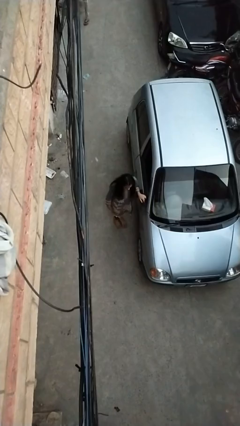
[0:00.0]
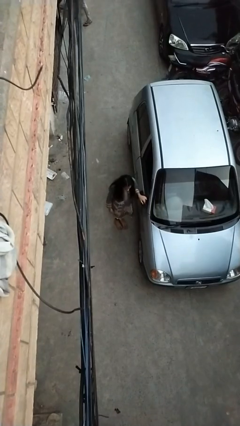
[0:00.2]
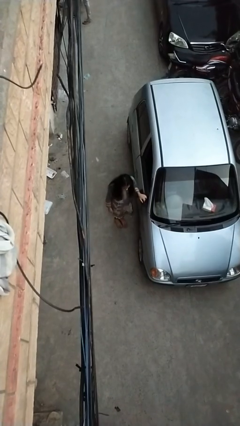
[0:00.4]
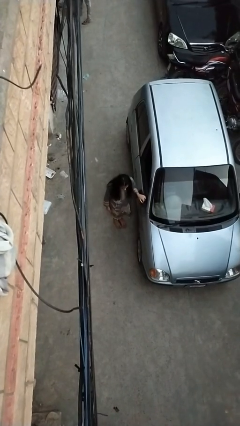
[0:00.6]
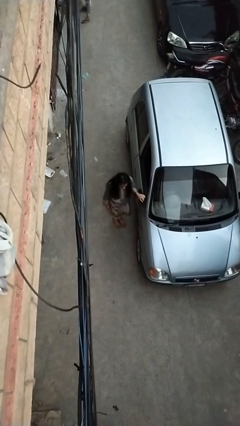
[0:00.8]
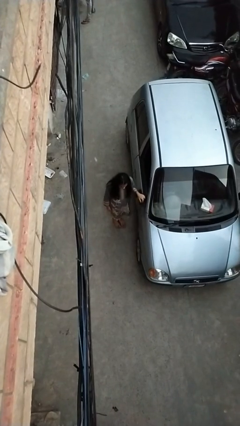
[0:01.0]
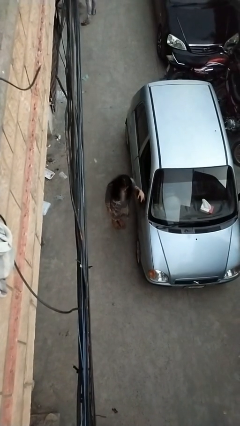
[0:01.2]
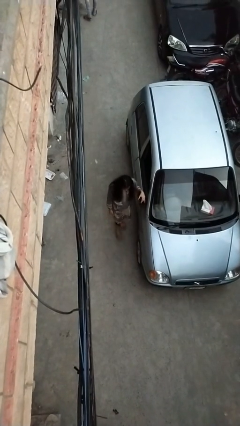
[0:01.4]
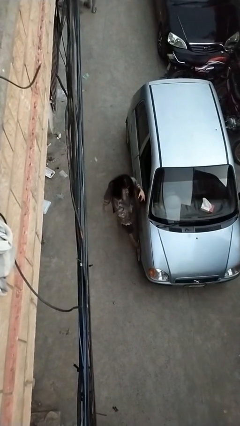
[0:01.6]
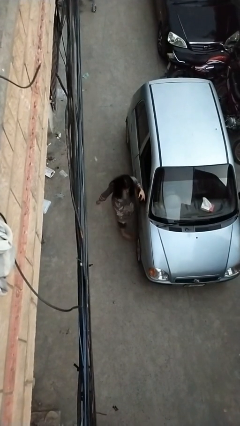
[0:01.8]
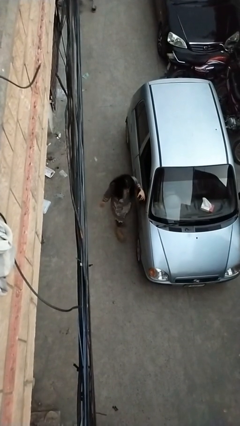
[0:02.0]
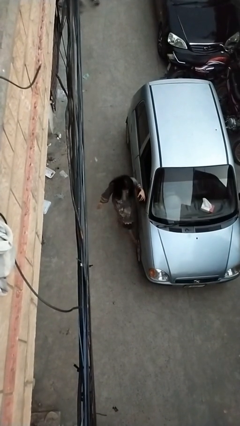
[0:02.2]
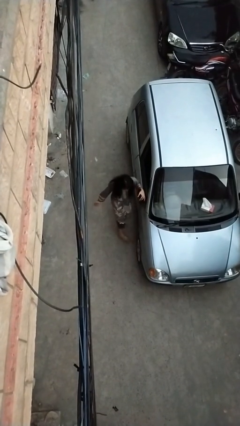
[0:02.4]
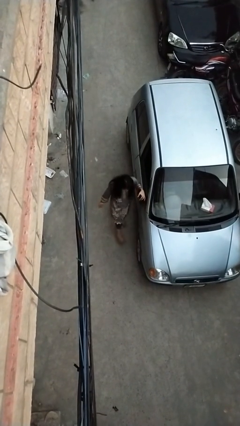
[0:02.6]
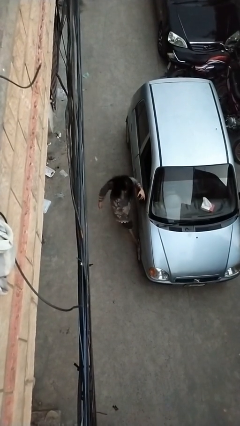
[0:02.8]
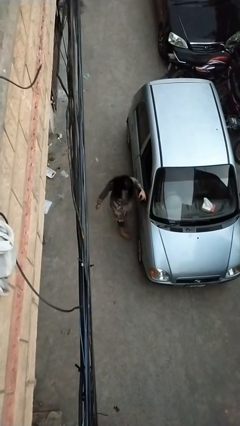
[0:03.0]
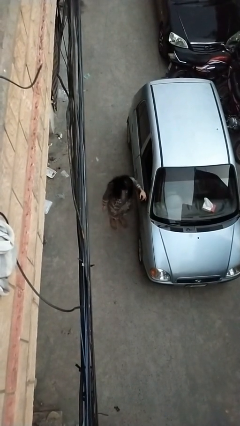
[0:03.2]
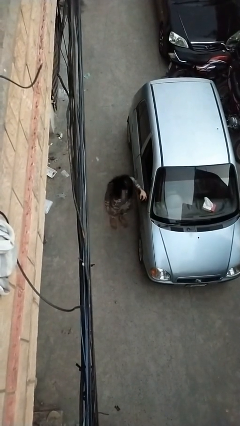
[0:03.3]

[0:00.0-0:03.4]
person kicks car tires

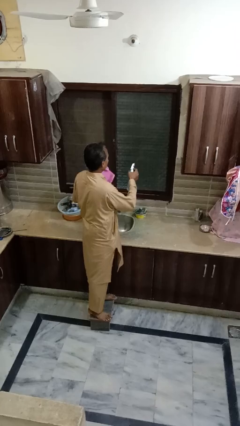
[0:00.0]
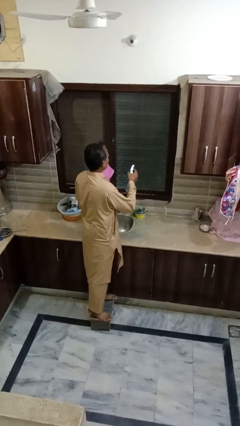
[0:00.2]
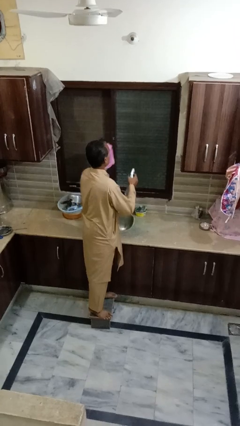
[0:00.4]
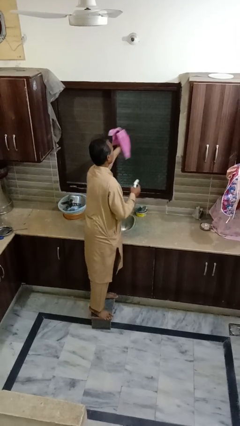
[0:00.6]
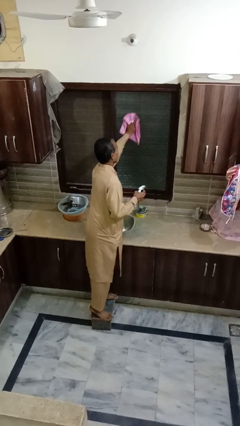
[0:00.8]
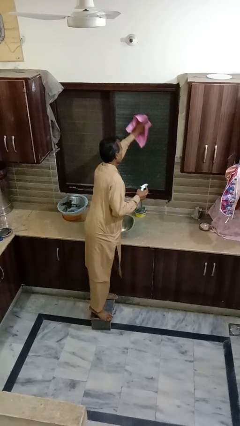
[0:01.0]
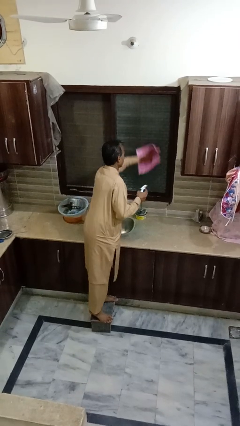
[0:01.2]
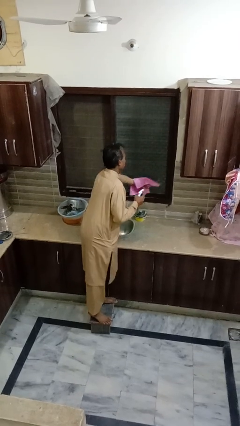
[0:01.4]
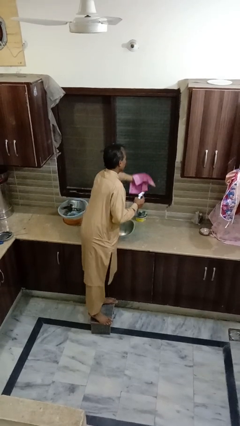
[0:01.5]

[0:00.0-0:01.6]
person washes window

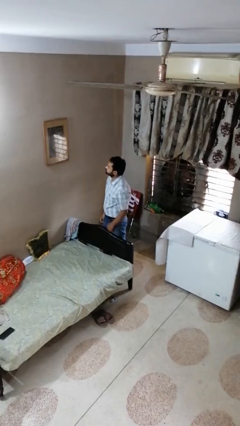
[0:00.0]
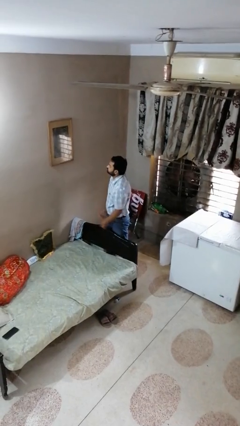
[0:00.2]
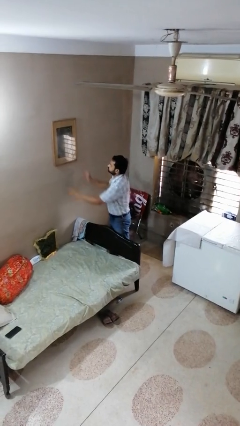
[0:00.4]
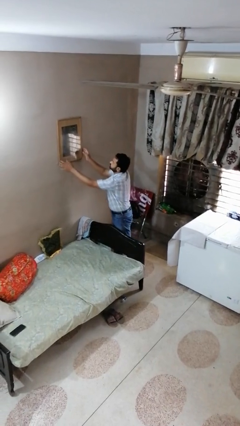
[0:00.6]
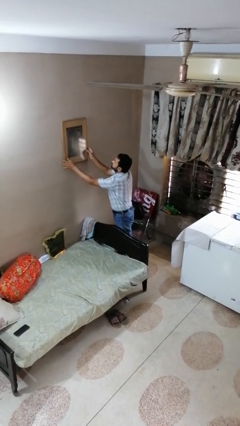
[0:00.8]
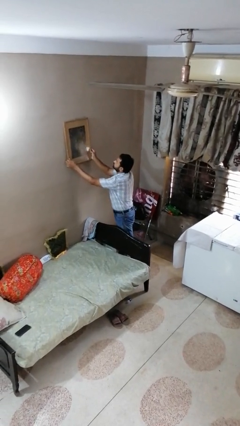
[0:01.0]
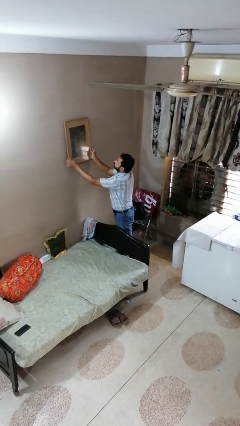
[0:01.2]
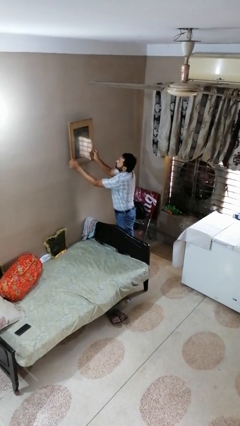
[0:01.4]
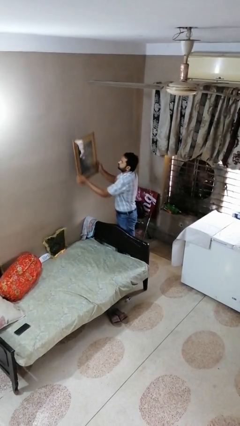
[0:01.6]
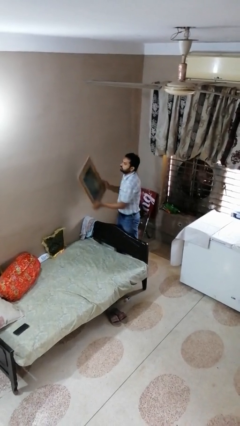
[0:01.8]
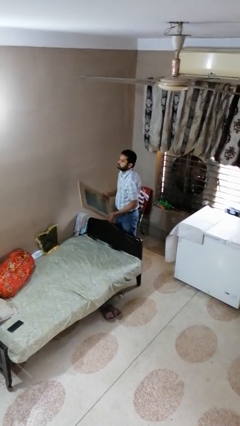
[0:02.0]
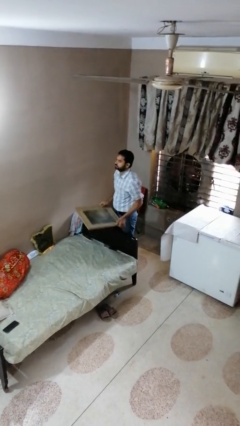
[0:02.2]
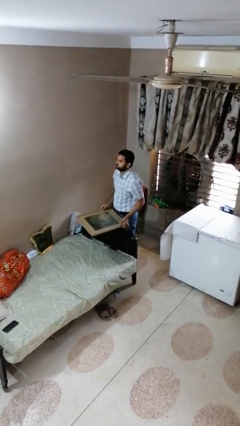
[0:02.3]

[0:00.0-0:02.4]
person takes down picture frame

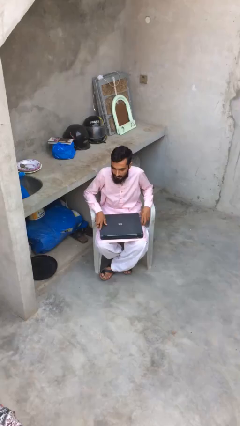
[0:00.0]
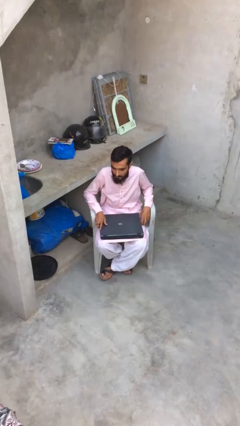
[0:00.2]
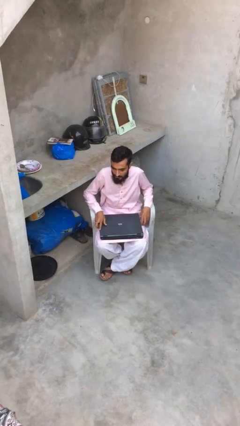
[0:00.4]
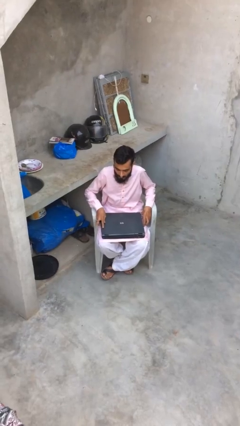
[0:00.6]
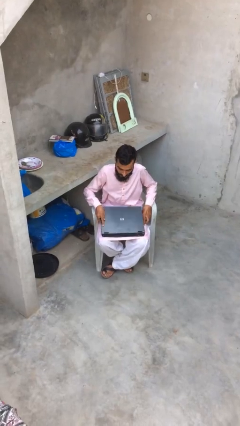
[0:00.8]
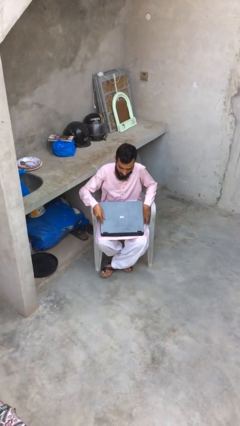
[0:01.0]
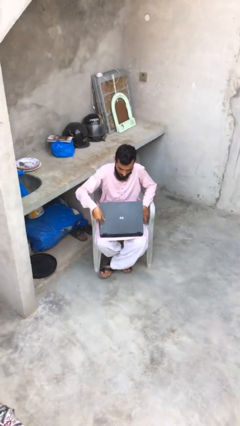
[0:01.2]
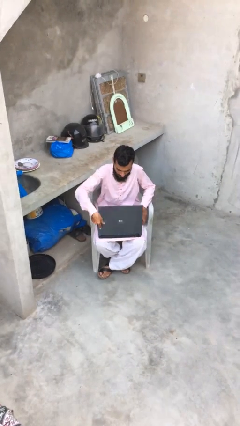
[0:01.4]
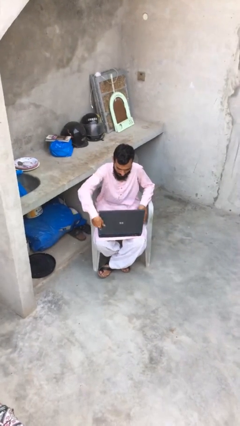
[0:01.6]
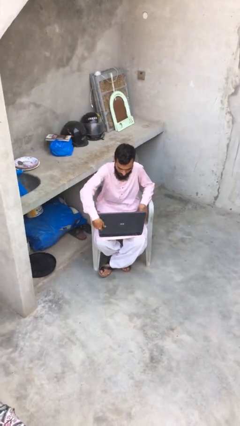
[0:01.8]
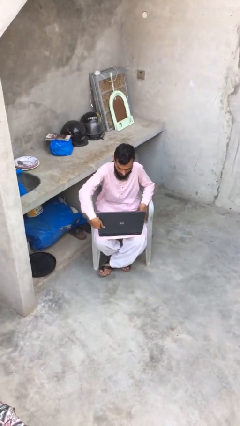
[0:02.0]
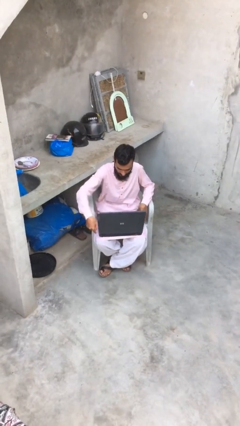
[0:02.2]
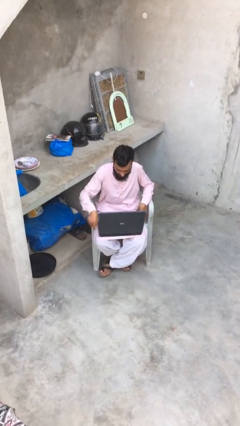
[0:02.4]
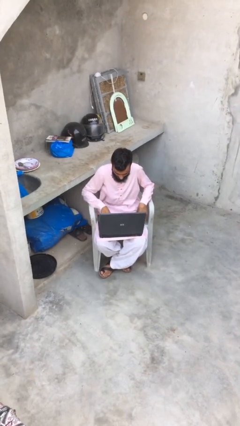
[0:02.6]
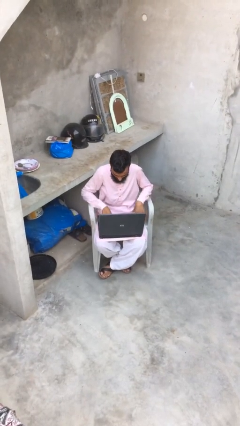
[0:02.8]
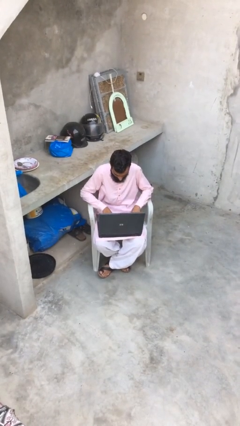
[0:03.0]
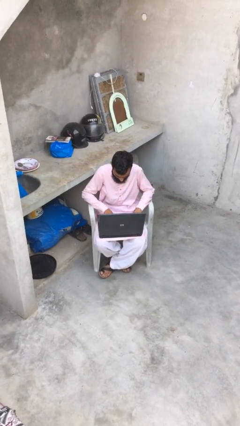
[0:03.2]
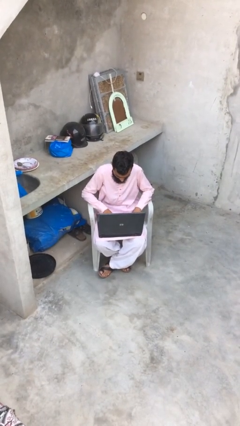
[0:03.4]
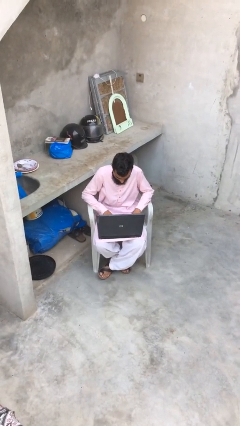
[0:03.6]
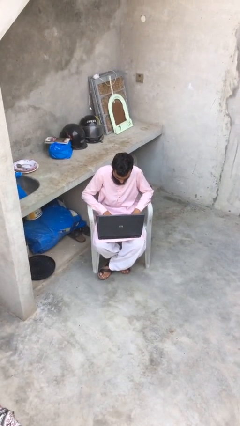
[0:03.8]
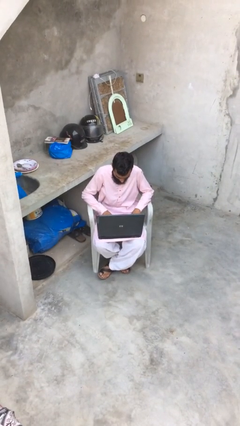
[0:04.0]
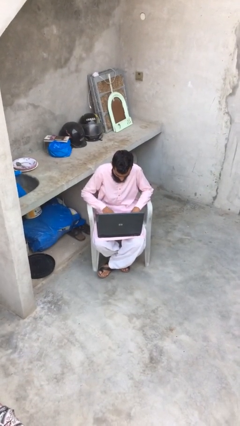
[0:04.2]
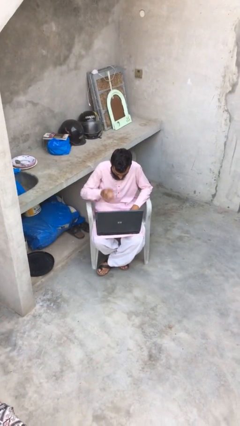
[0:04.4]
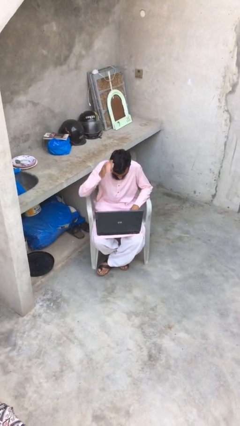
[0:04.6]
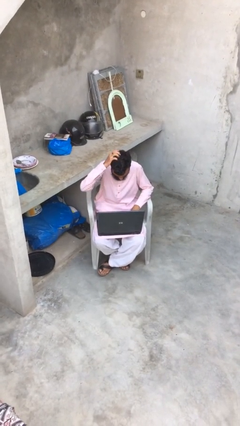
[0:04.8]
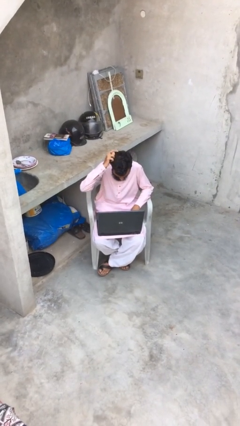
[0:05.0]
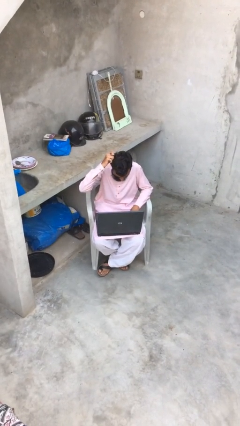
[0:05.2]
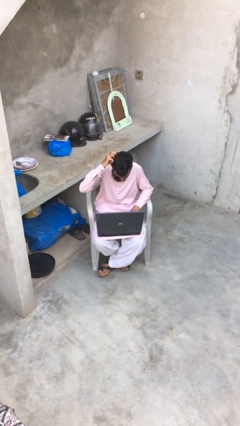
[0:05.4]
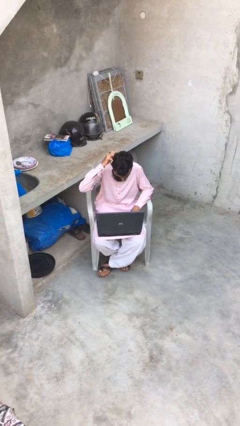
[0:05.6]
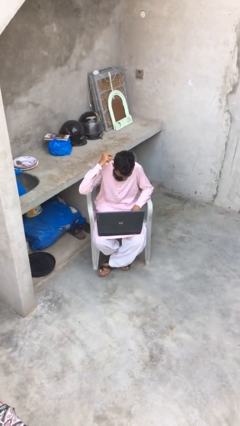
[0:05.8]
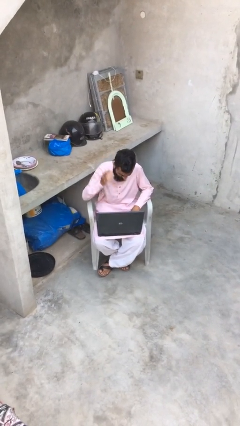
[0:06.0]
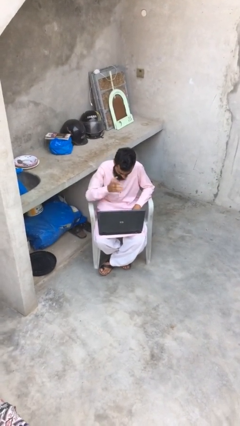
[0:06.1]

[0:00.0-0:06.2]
person interacts with laptop

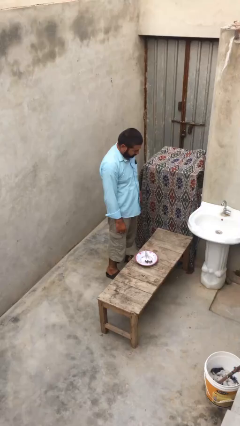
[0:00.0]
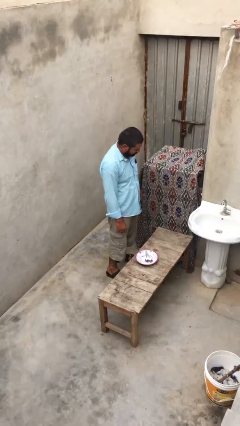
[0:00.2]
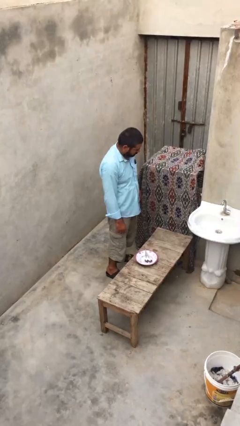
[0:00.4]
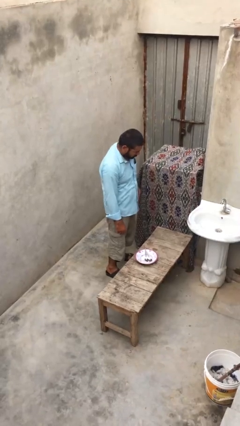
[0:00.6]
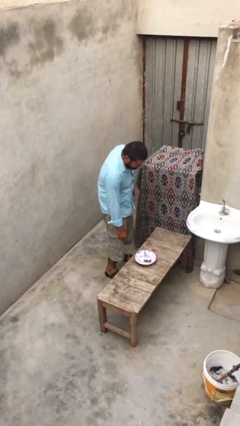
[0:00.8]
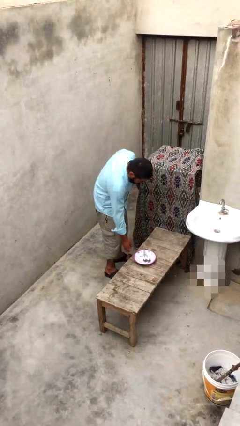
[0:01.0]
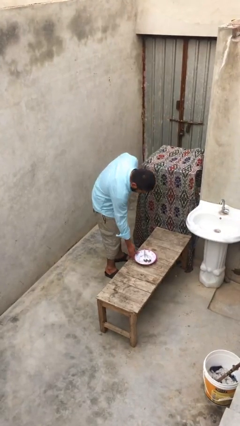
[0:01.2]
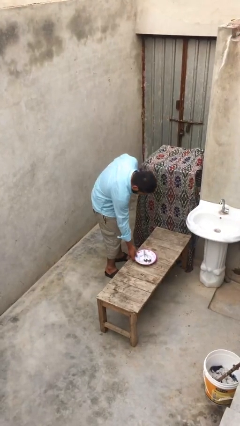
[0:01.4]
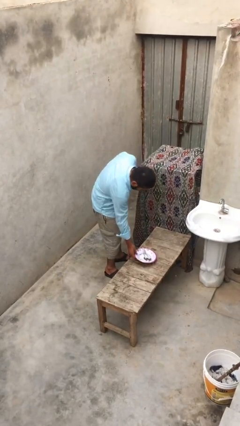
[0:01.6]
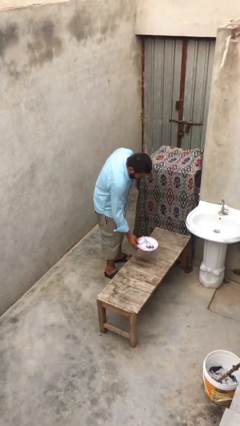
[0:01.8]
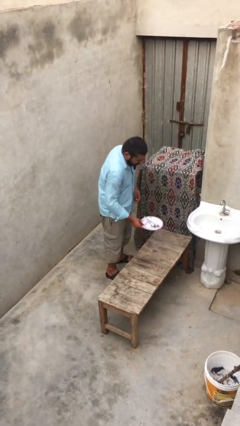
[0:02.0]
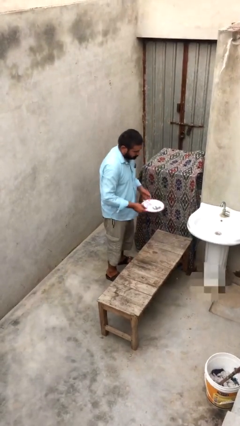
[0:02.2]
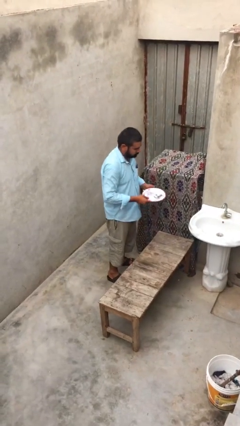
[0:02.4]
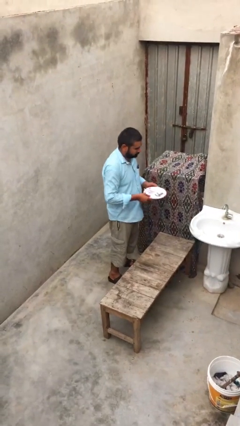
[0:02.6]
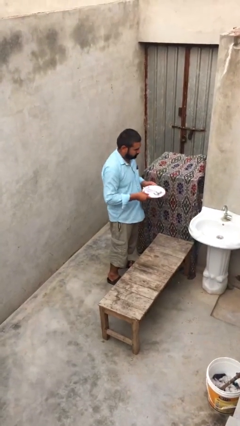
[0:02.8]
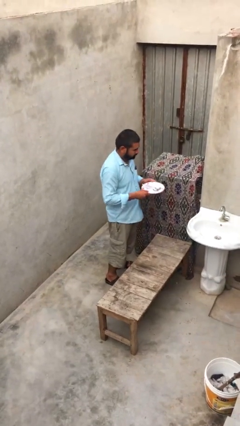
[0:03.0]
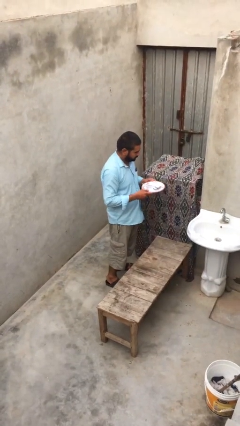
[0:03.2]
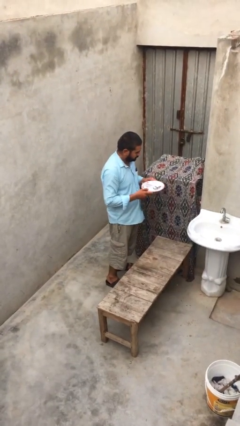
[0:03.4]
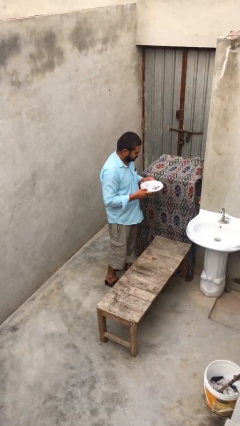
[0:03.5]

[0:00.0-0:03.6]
person picks up object from table

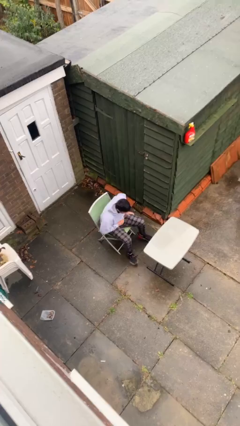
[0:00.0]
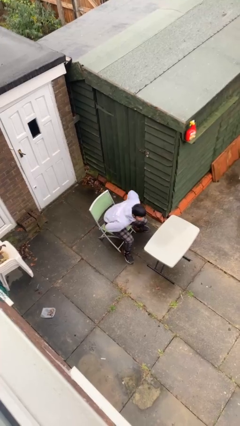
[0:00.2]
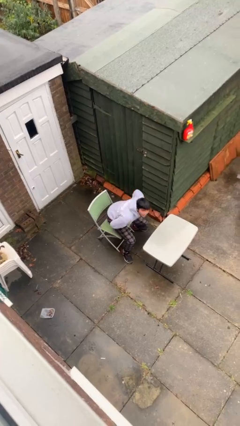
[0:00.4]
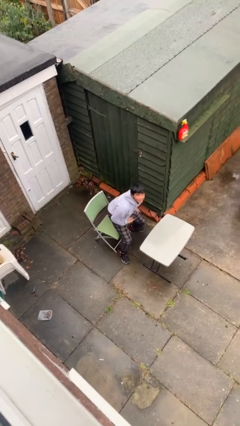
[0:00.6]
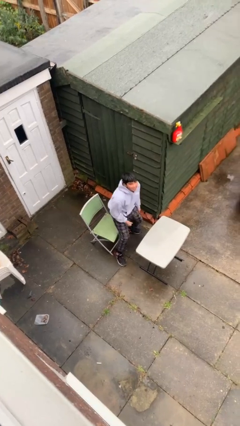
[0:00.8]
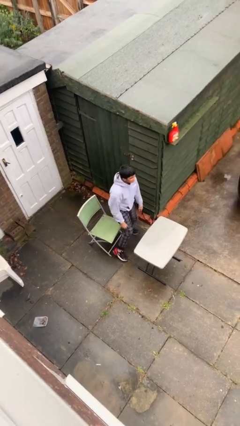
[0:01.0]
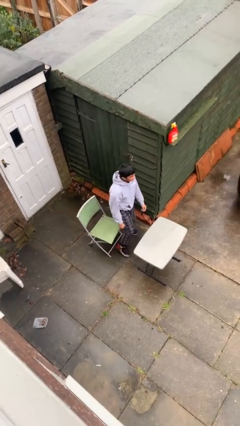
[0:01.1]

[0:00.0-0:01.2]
person stands up
